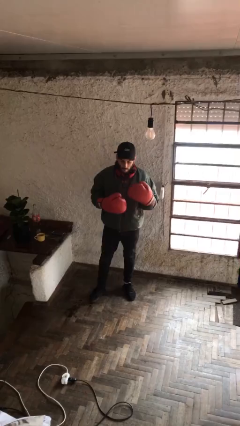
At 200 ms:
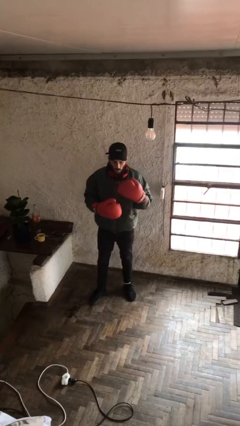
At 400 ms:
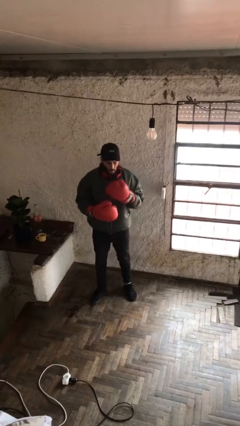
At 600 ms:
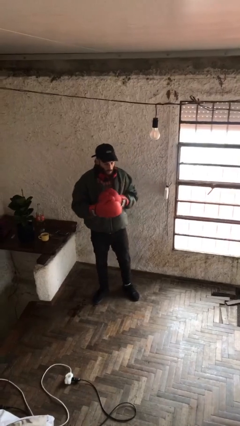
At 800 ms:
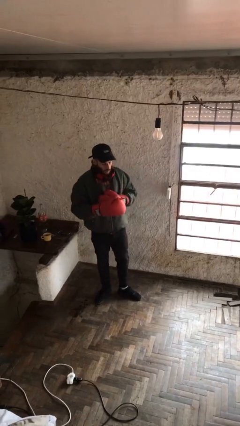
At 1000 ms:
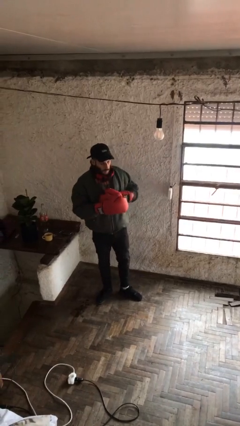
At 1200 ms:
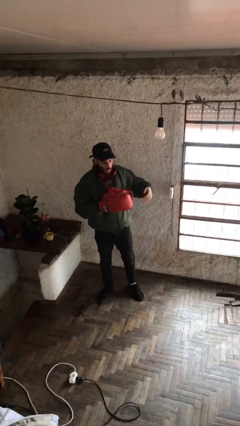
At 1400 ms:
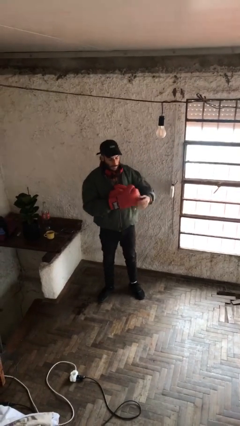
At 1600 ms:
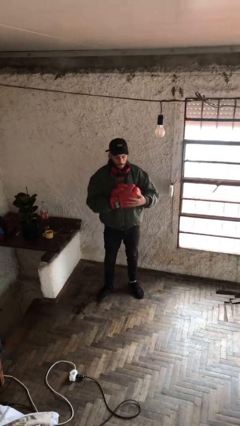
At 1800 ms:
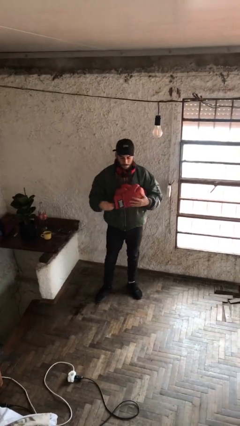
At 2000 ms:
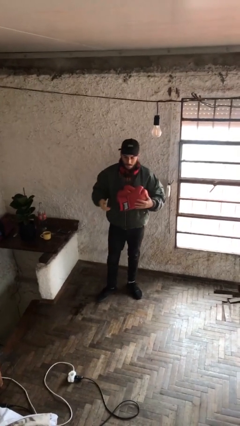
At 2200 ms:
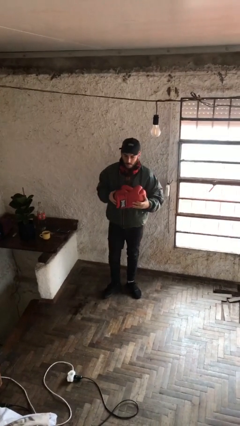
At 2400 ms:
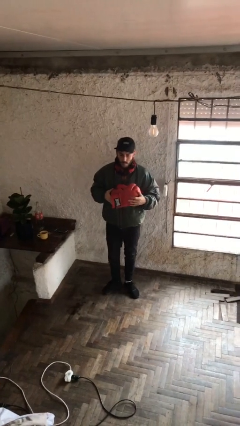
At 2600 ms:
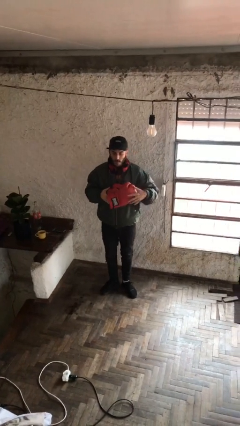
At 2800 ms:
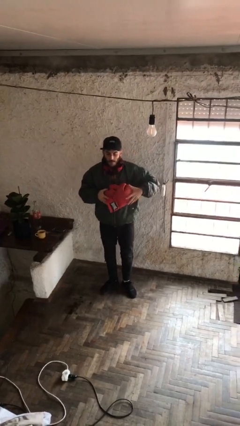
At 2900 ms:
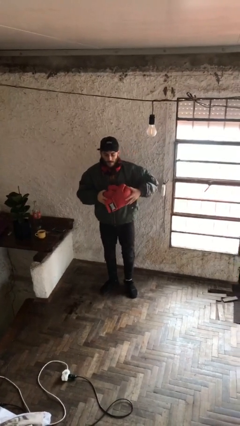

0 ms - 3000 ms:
person takes off gloves

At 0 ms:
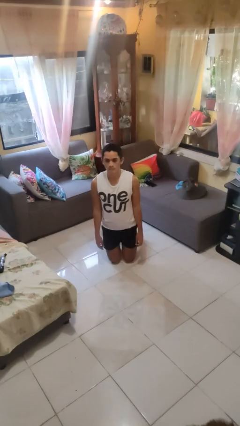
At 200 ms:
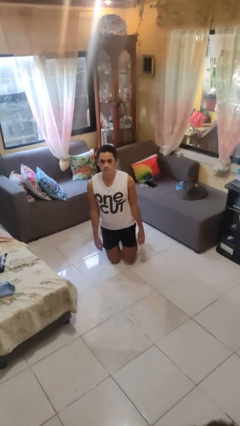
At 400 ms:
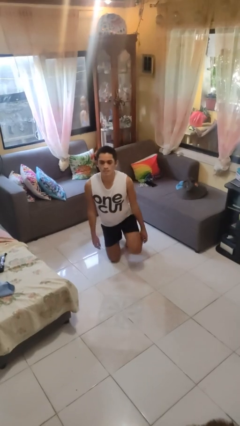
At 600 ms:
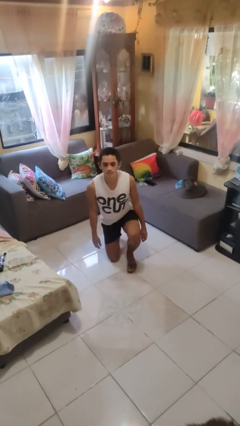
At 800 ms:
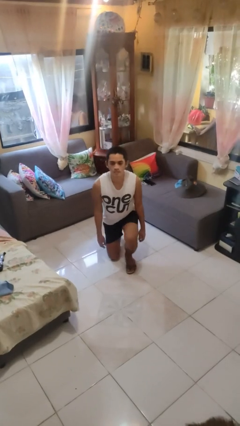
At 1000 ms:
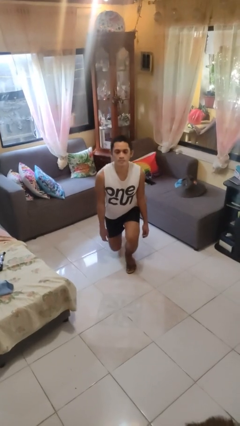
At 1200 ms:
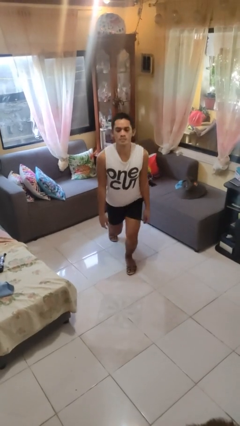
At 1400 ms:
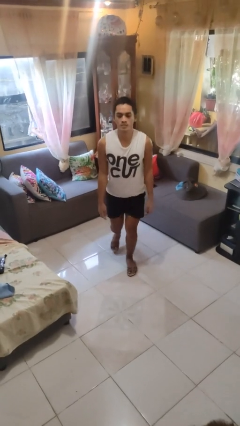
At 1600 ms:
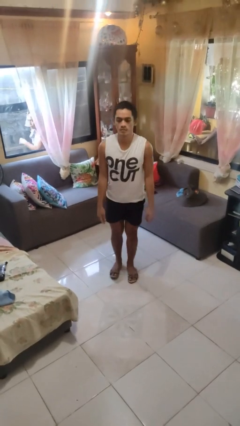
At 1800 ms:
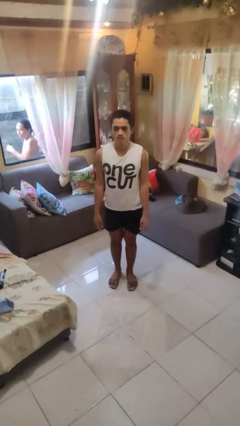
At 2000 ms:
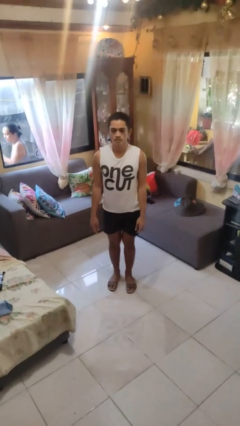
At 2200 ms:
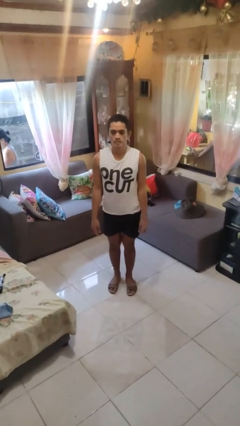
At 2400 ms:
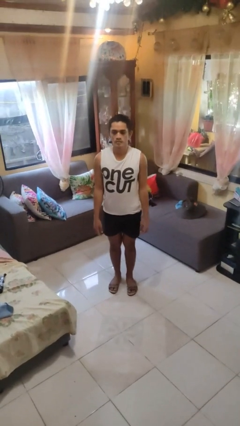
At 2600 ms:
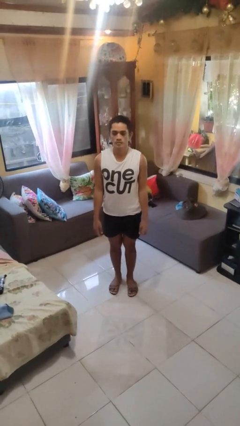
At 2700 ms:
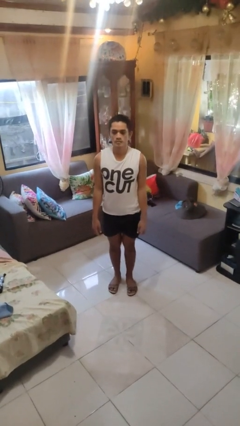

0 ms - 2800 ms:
person stands up from floor

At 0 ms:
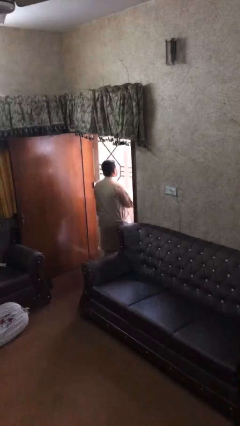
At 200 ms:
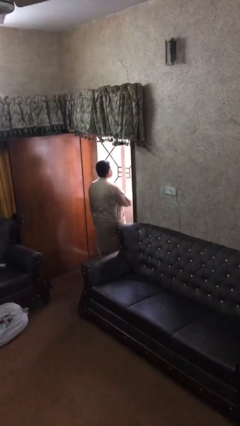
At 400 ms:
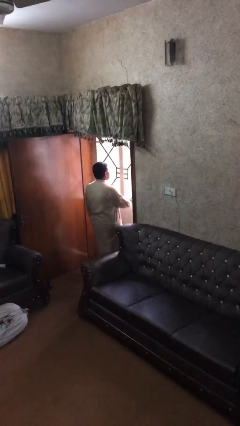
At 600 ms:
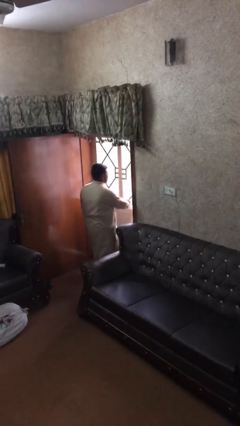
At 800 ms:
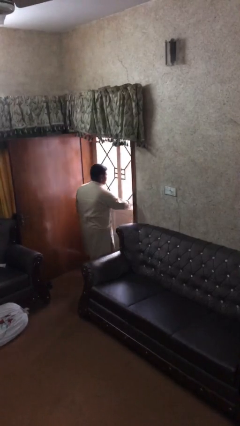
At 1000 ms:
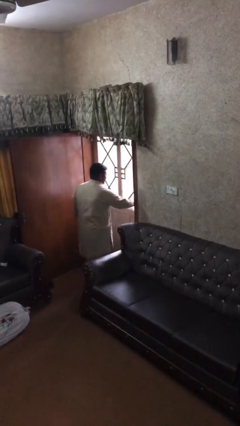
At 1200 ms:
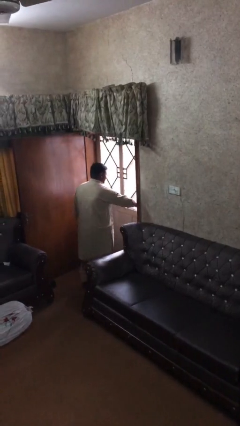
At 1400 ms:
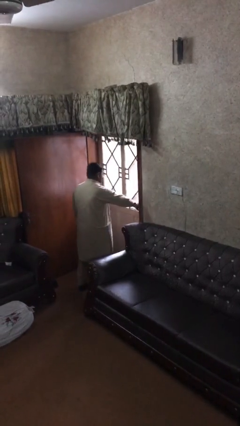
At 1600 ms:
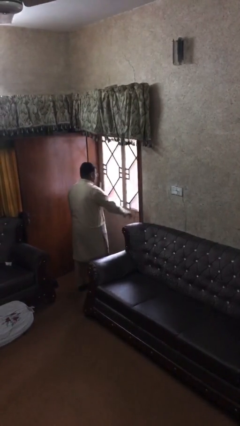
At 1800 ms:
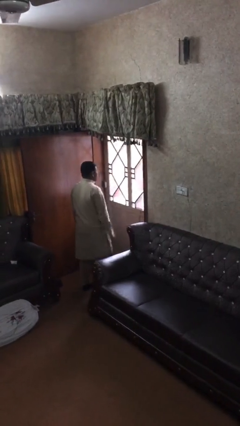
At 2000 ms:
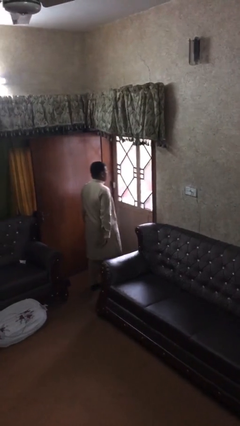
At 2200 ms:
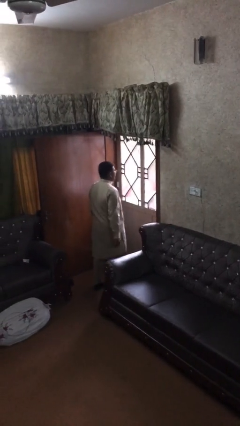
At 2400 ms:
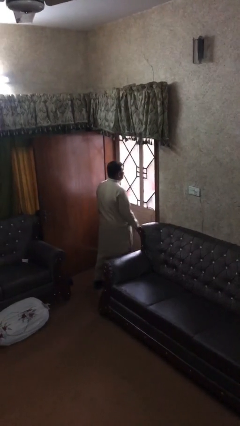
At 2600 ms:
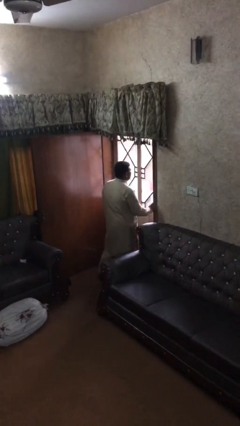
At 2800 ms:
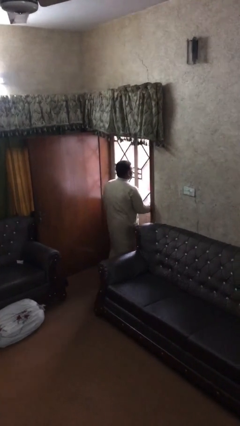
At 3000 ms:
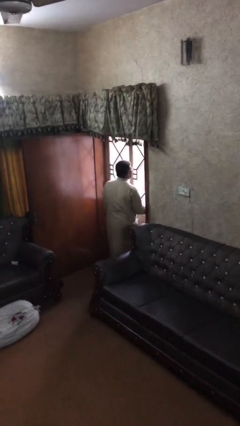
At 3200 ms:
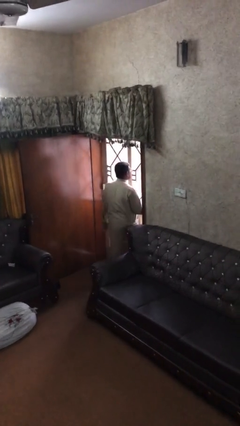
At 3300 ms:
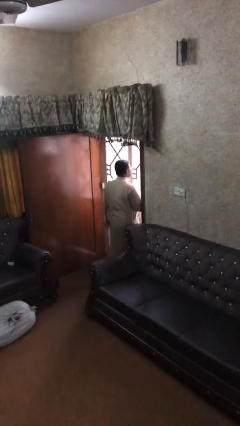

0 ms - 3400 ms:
person closes facility door

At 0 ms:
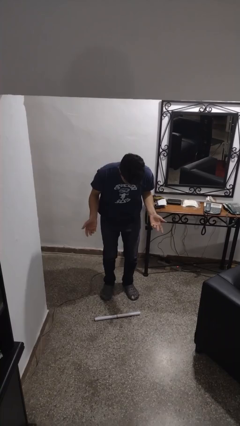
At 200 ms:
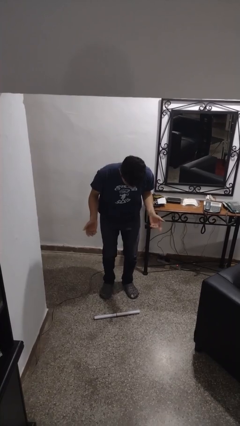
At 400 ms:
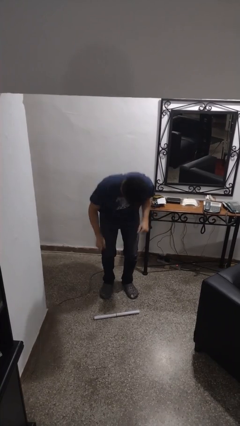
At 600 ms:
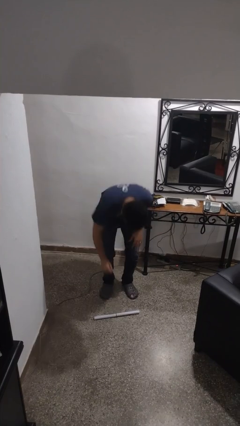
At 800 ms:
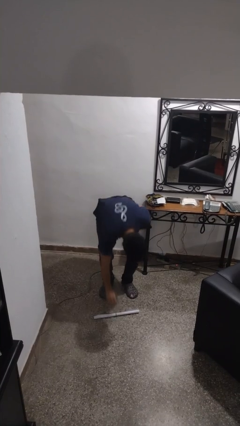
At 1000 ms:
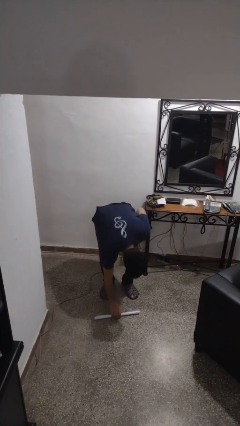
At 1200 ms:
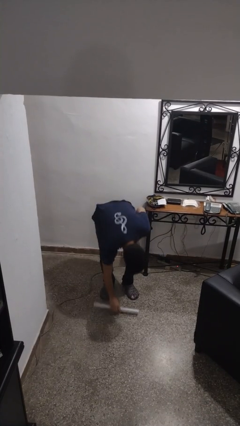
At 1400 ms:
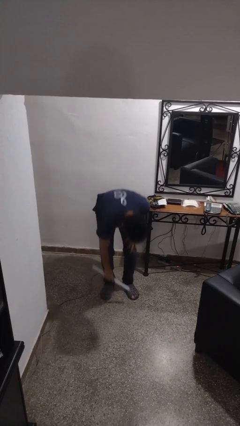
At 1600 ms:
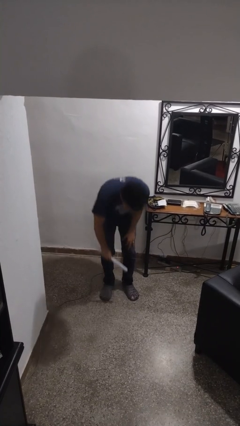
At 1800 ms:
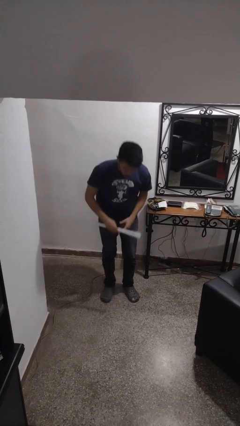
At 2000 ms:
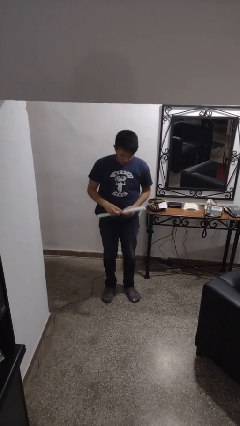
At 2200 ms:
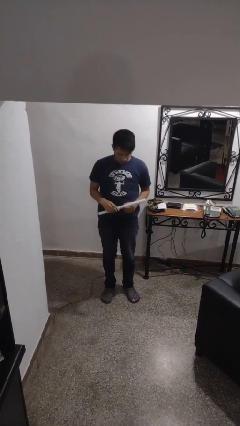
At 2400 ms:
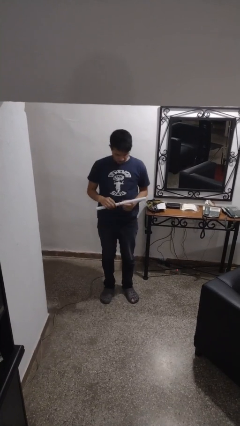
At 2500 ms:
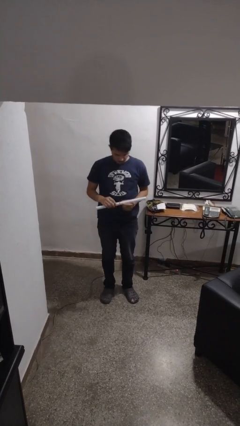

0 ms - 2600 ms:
person picks up object from floor

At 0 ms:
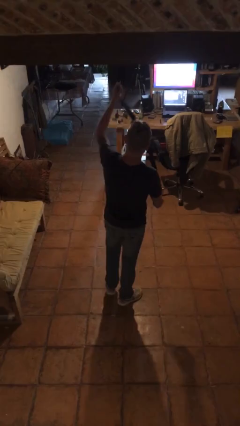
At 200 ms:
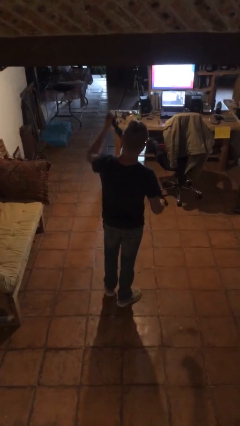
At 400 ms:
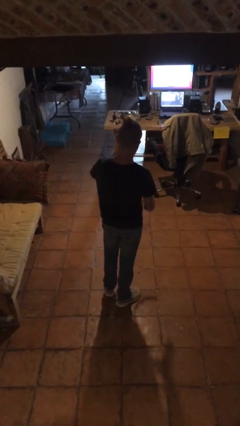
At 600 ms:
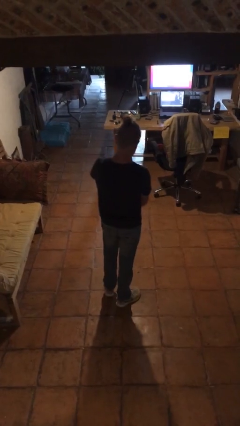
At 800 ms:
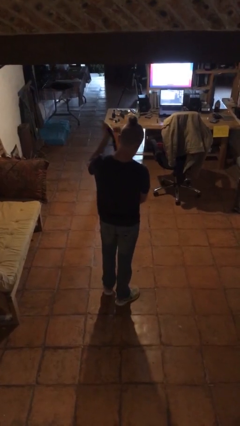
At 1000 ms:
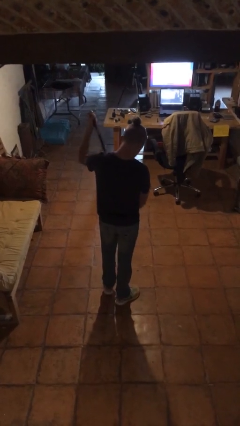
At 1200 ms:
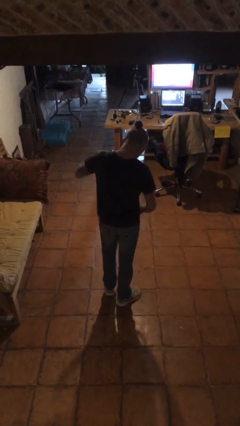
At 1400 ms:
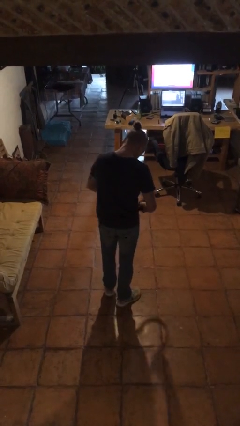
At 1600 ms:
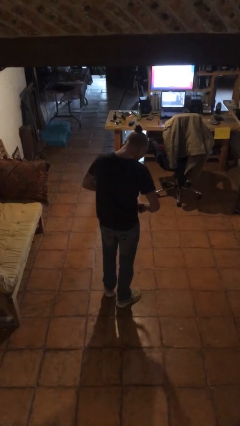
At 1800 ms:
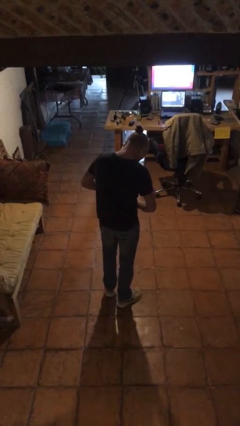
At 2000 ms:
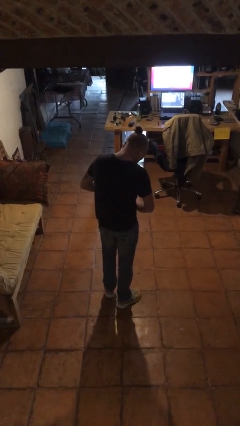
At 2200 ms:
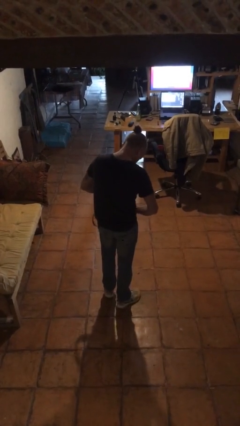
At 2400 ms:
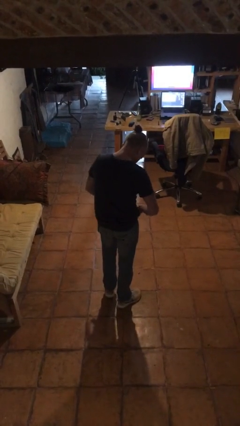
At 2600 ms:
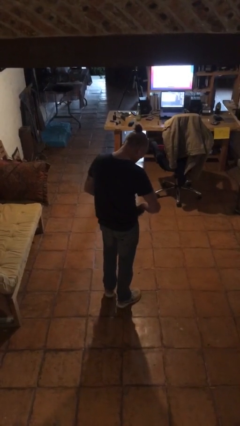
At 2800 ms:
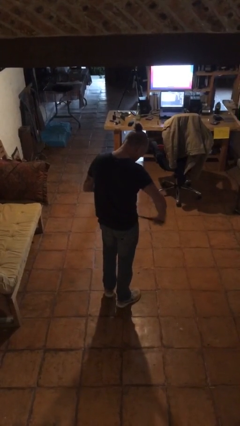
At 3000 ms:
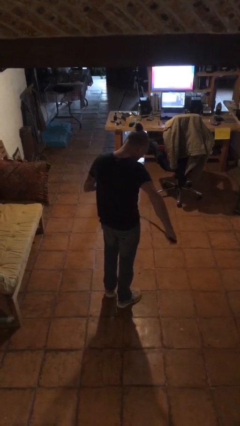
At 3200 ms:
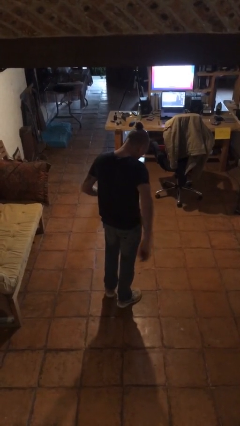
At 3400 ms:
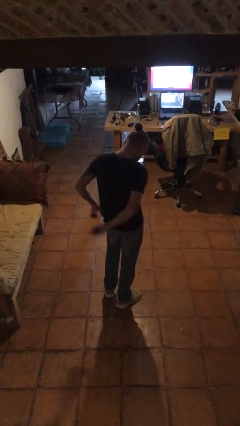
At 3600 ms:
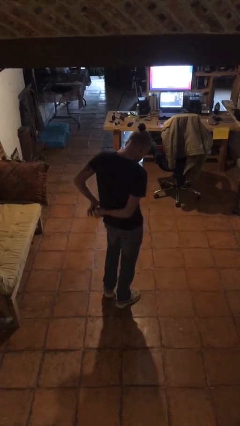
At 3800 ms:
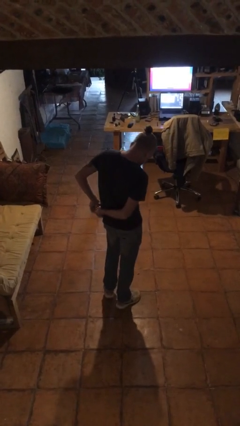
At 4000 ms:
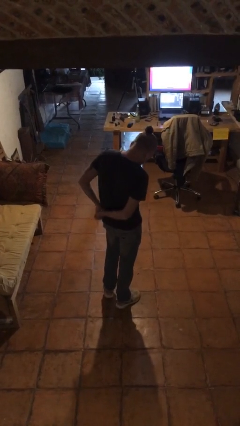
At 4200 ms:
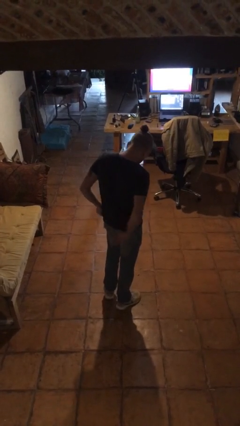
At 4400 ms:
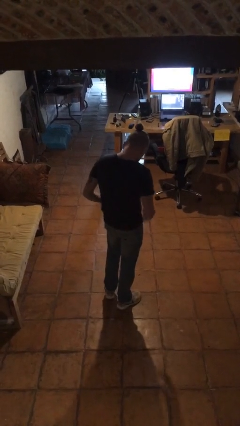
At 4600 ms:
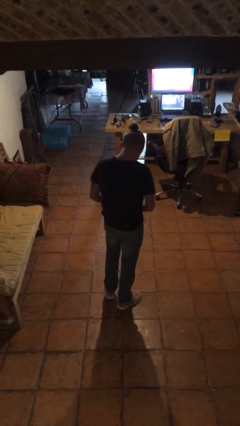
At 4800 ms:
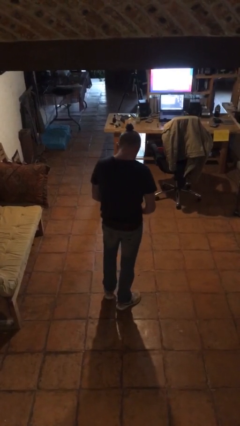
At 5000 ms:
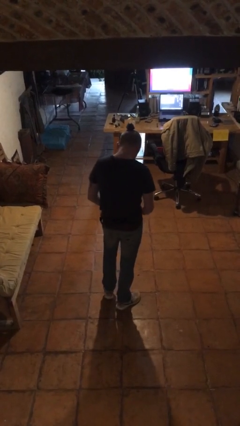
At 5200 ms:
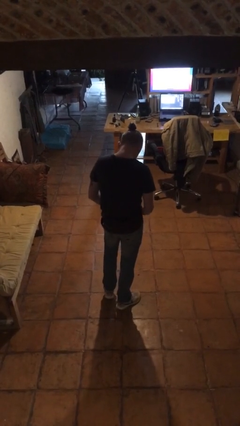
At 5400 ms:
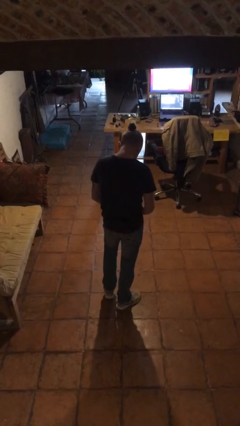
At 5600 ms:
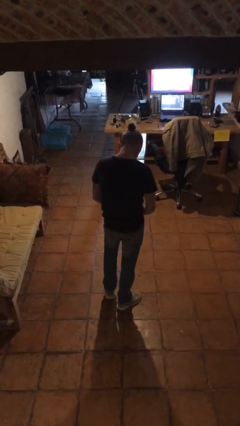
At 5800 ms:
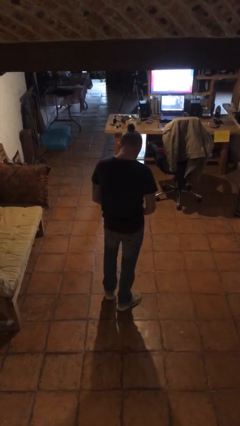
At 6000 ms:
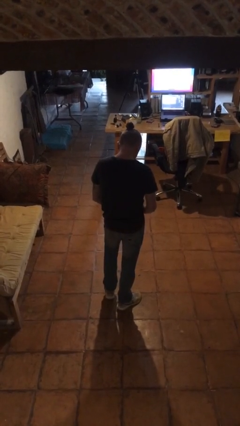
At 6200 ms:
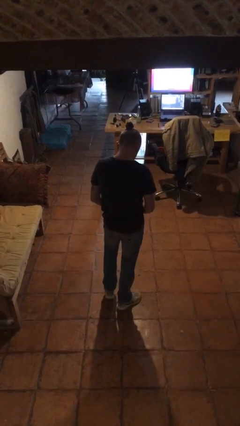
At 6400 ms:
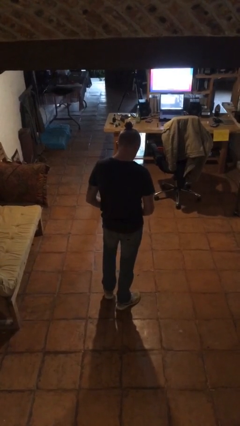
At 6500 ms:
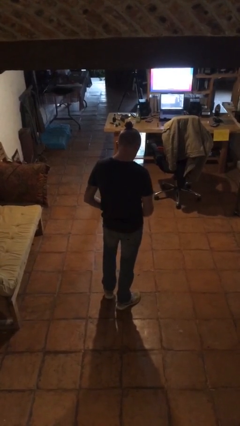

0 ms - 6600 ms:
person puts on belt
